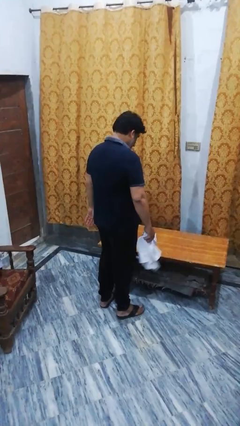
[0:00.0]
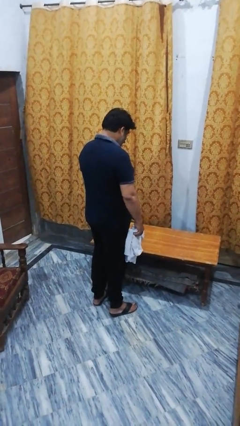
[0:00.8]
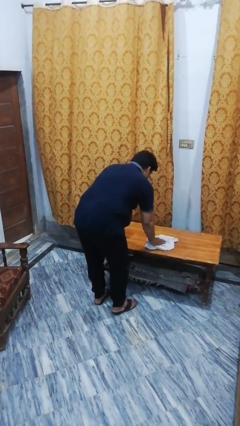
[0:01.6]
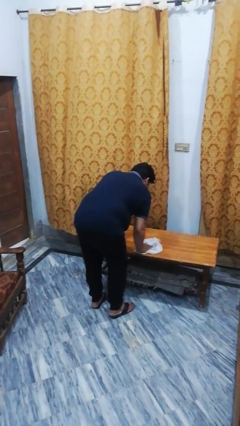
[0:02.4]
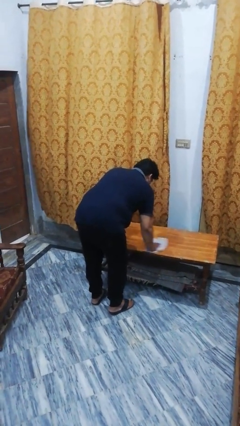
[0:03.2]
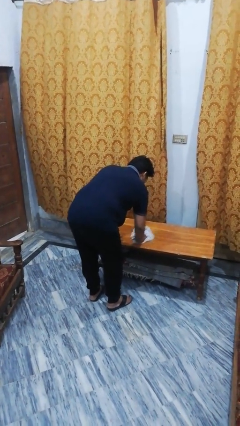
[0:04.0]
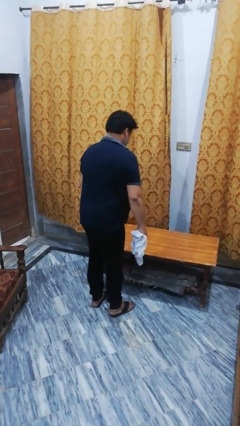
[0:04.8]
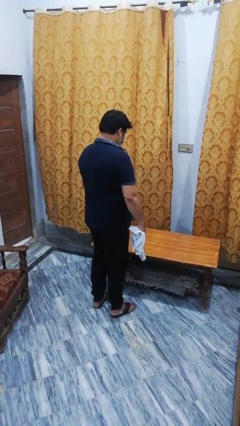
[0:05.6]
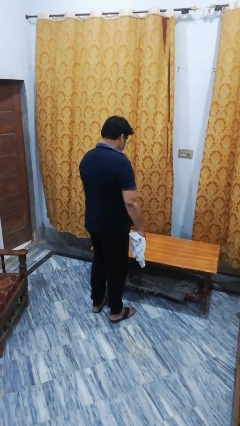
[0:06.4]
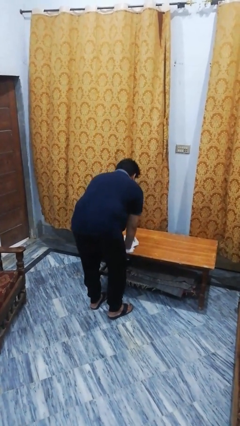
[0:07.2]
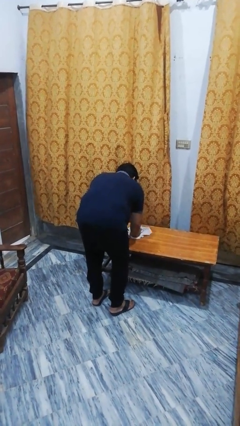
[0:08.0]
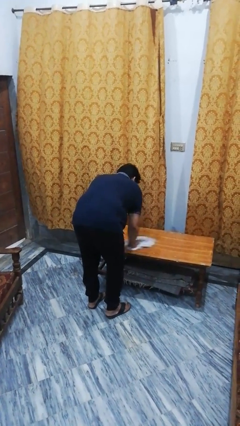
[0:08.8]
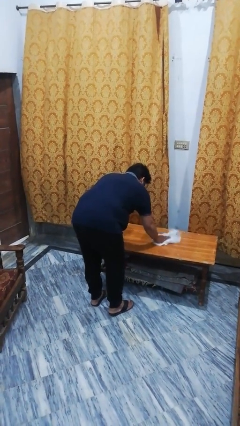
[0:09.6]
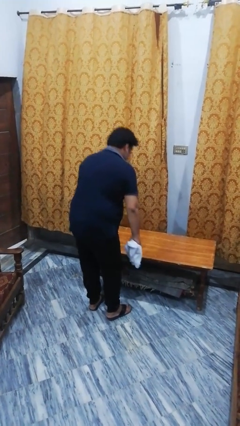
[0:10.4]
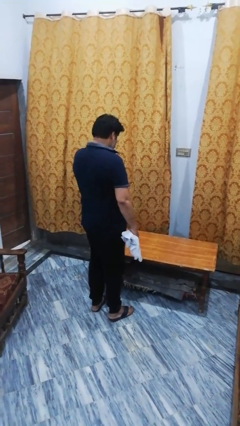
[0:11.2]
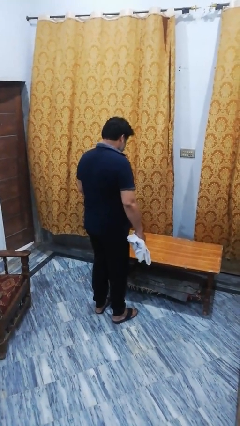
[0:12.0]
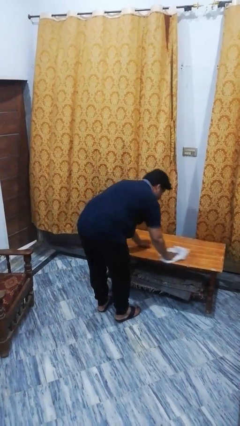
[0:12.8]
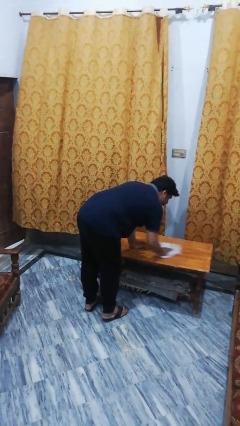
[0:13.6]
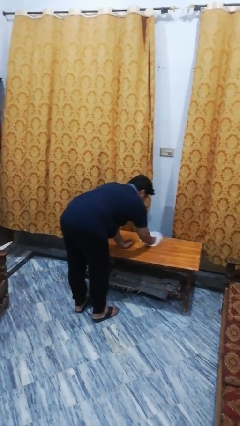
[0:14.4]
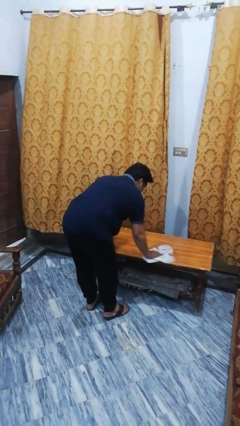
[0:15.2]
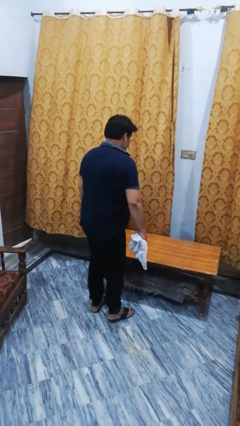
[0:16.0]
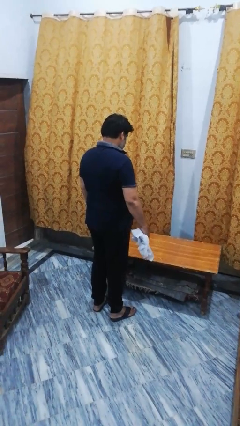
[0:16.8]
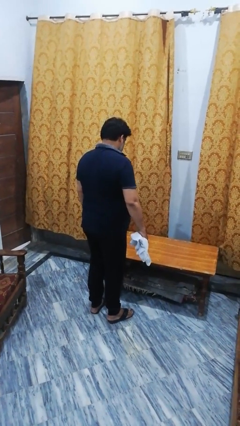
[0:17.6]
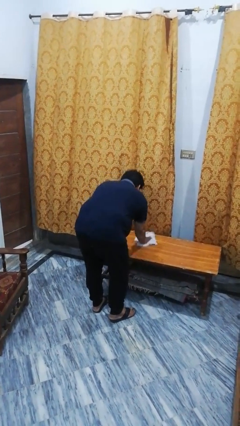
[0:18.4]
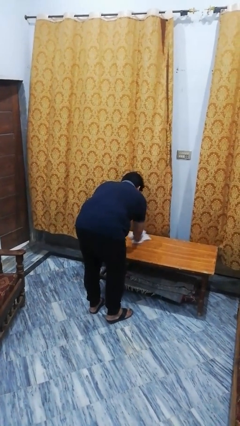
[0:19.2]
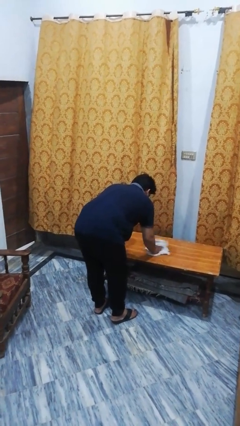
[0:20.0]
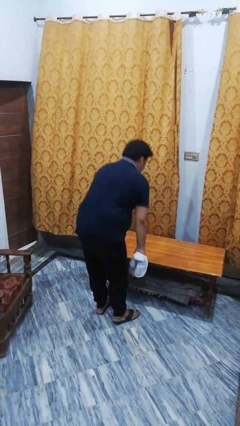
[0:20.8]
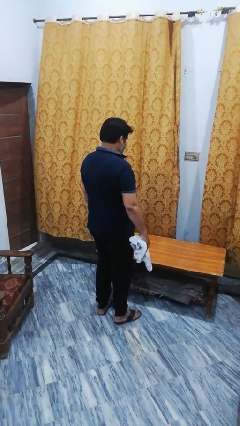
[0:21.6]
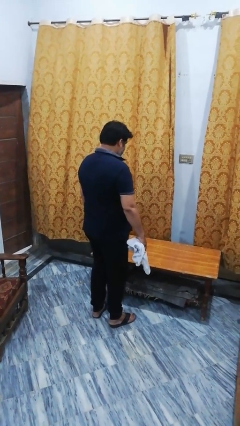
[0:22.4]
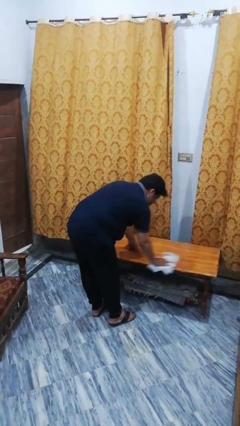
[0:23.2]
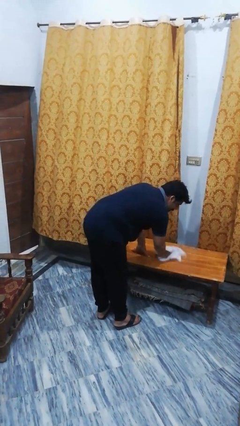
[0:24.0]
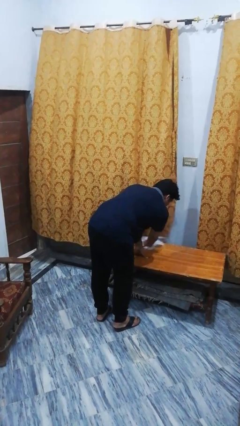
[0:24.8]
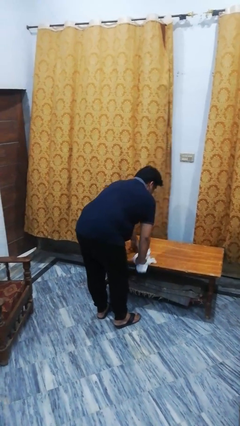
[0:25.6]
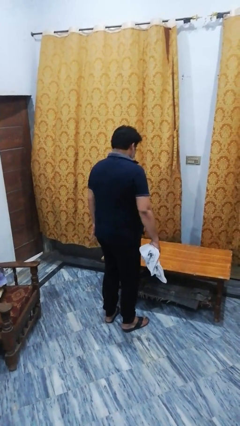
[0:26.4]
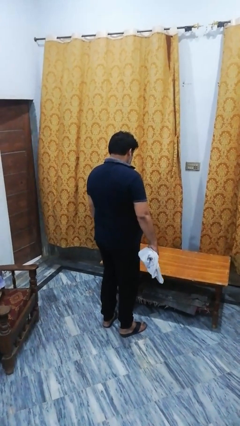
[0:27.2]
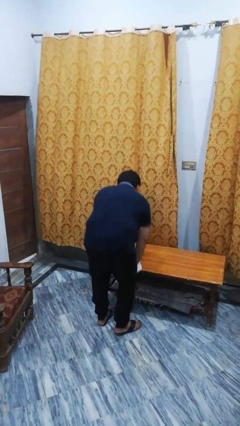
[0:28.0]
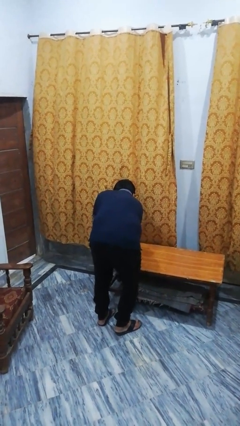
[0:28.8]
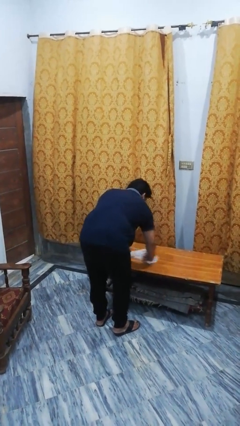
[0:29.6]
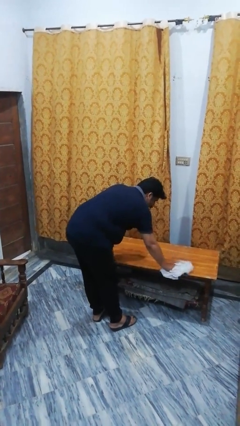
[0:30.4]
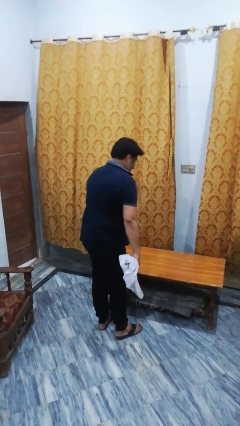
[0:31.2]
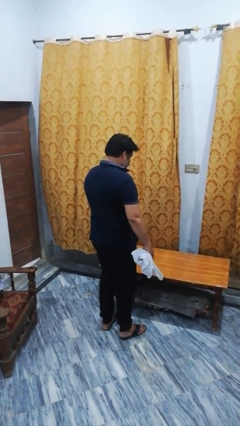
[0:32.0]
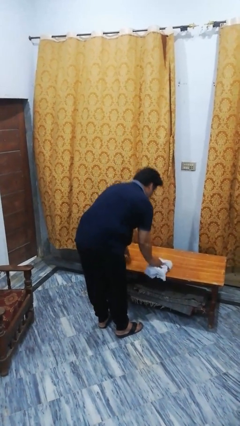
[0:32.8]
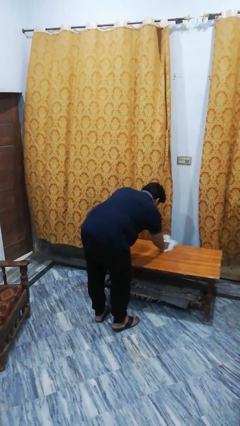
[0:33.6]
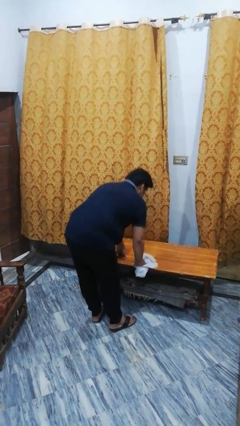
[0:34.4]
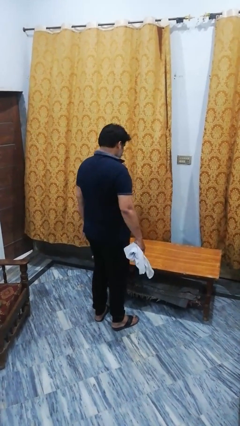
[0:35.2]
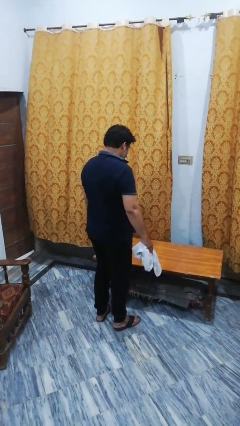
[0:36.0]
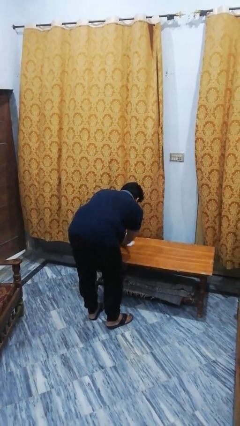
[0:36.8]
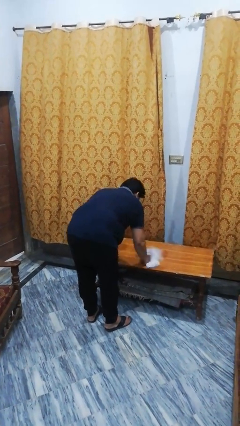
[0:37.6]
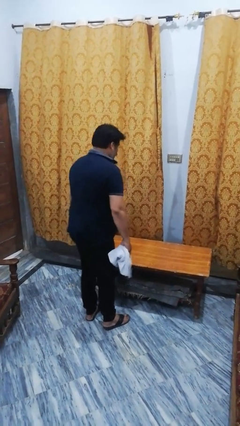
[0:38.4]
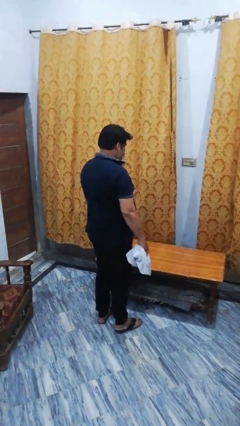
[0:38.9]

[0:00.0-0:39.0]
person cleans table with rag

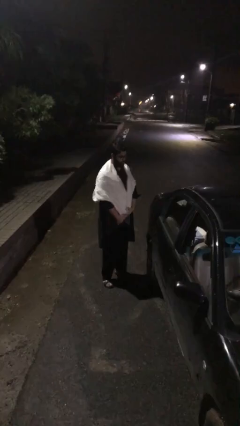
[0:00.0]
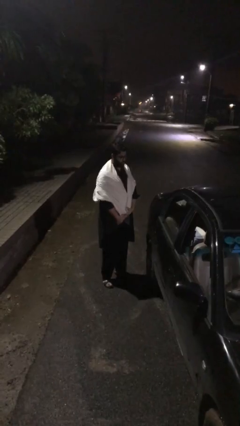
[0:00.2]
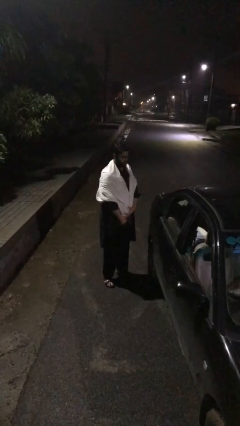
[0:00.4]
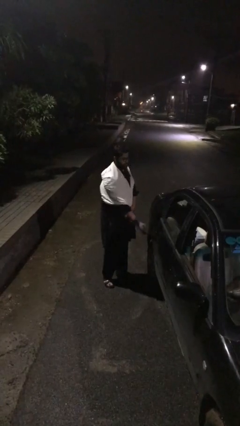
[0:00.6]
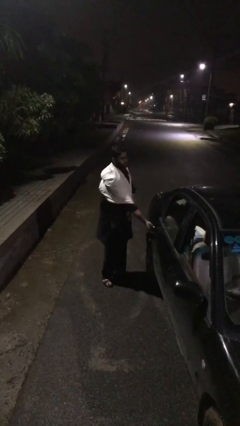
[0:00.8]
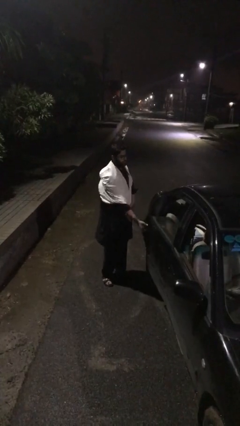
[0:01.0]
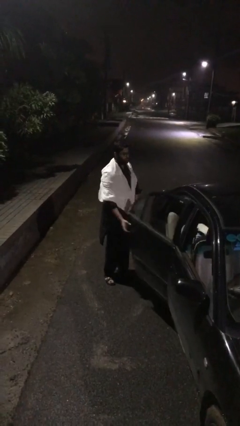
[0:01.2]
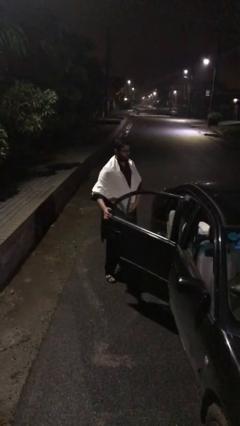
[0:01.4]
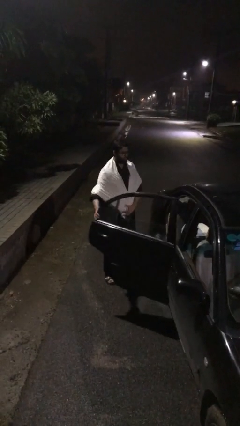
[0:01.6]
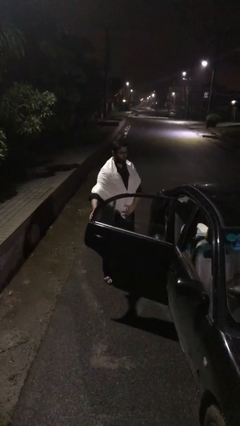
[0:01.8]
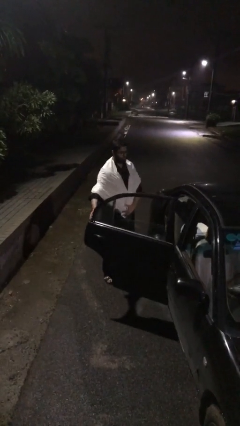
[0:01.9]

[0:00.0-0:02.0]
person opens car door

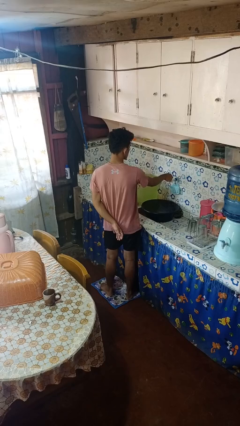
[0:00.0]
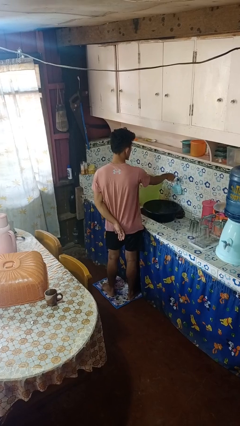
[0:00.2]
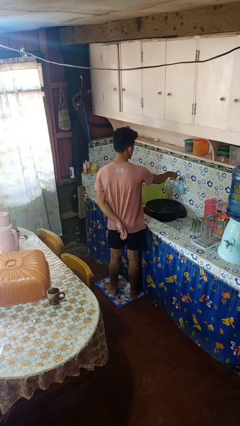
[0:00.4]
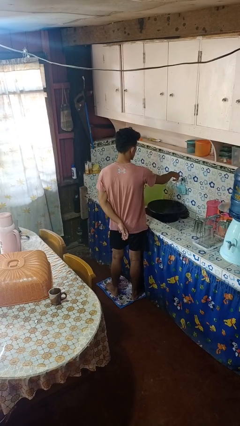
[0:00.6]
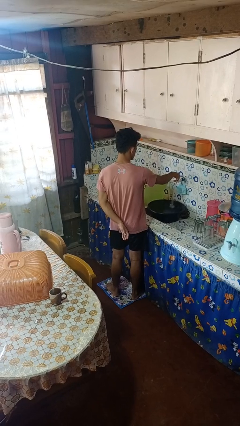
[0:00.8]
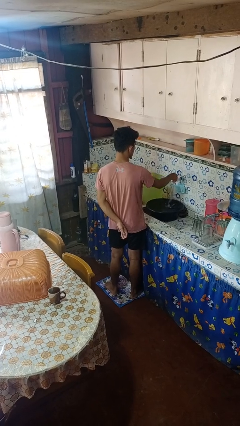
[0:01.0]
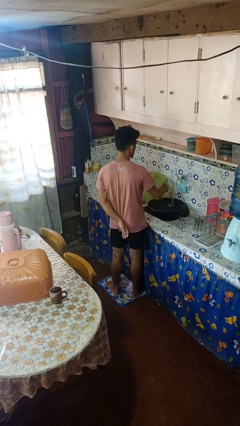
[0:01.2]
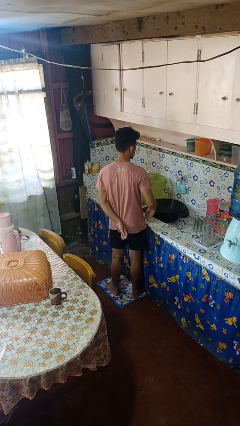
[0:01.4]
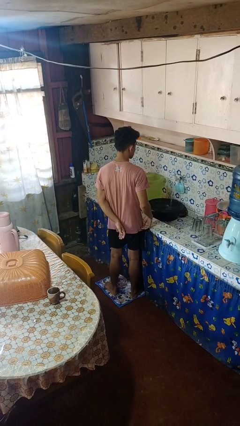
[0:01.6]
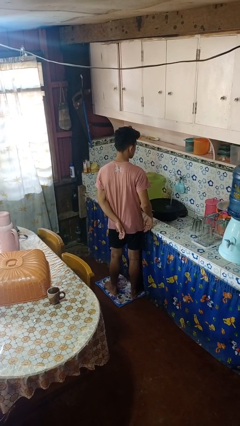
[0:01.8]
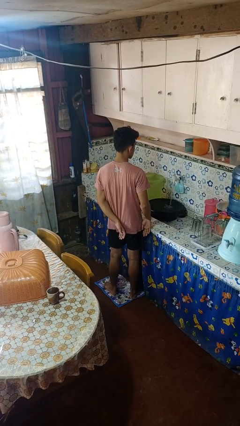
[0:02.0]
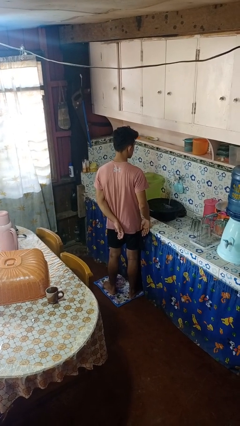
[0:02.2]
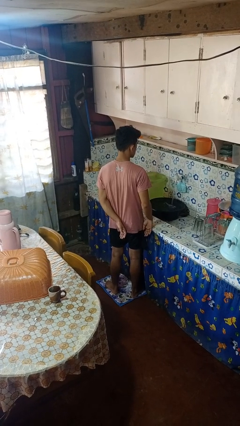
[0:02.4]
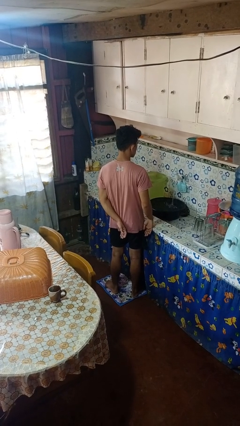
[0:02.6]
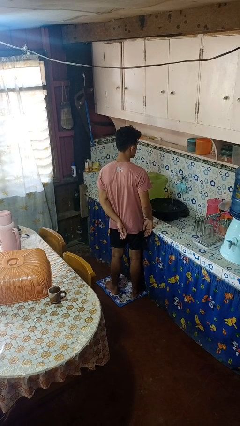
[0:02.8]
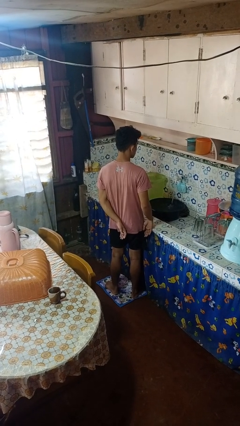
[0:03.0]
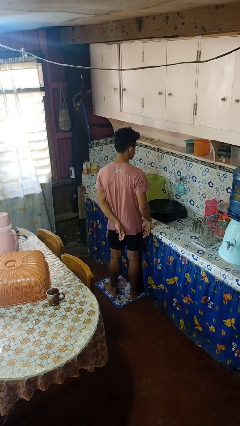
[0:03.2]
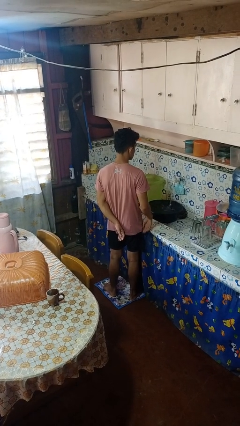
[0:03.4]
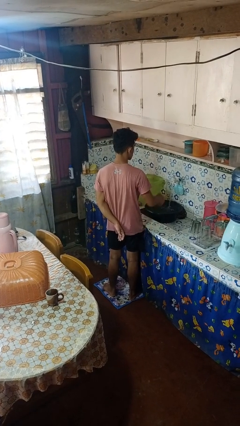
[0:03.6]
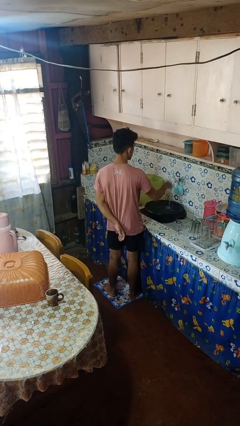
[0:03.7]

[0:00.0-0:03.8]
person turns on faucet

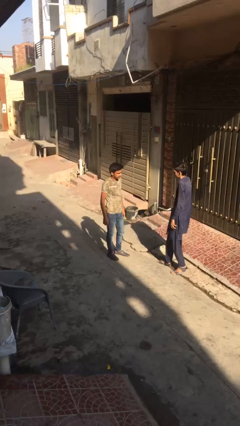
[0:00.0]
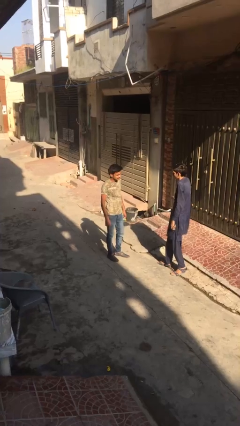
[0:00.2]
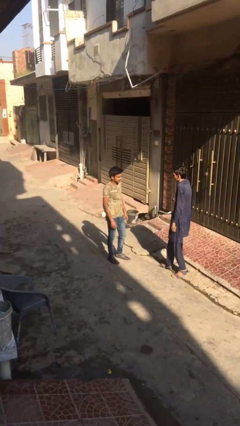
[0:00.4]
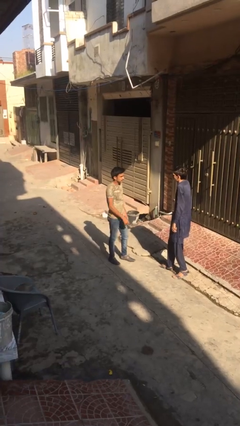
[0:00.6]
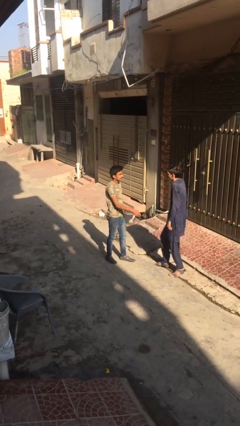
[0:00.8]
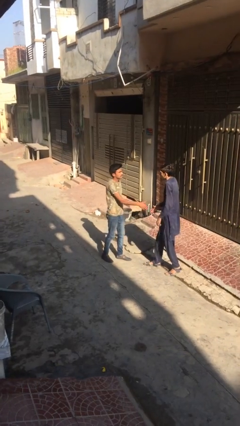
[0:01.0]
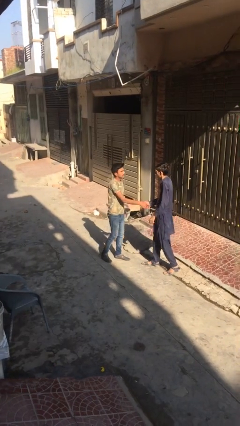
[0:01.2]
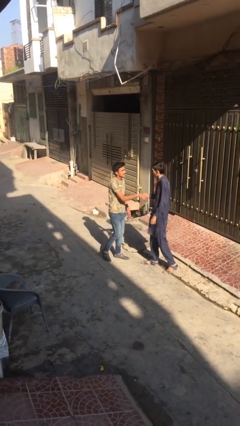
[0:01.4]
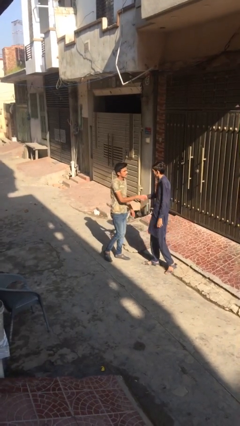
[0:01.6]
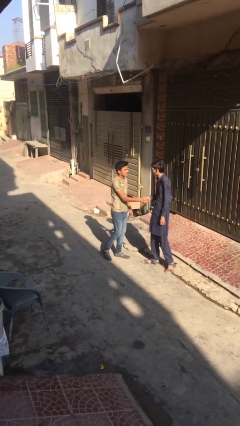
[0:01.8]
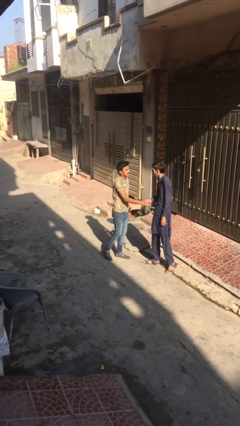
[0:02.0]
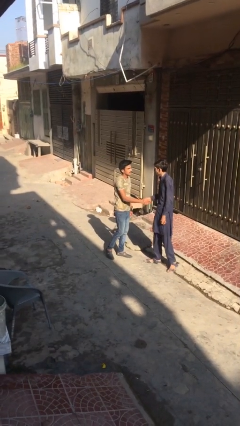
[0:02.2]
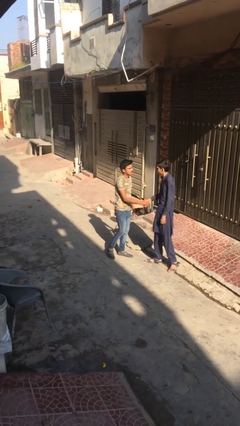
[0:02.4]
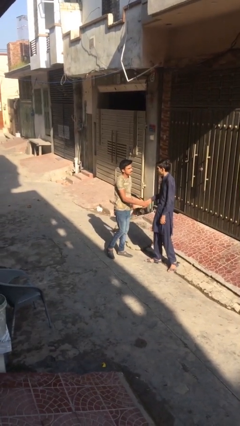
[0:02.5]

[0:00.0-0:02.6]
person shakes hand

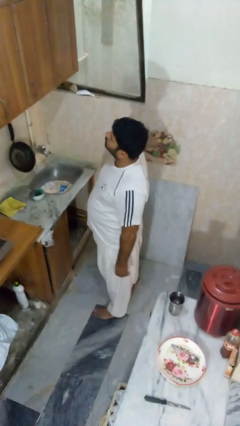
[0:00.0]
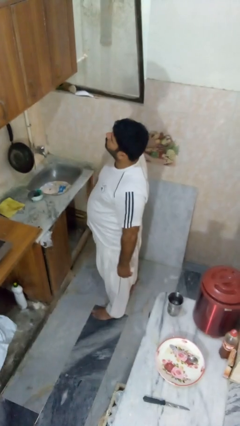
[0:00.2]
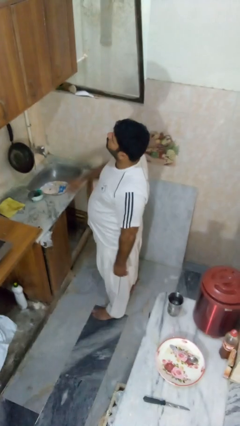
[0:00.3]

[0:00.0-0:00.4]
person closes cabinet
